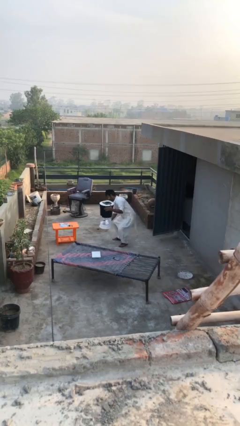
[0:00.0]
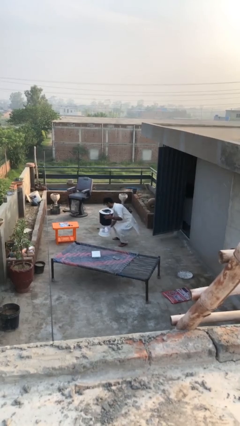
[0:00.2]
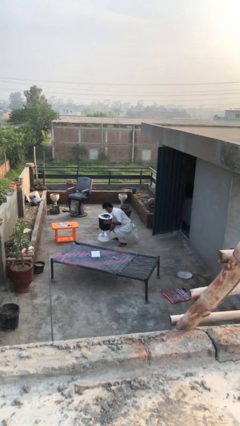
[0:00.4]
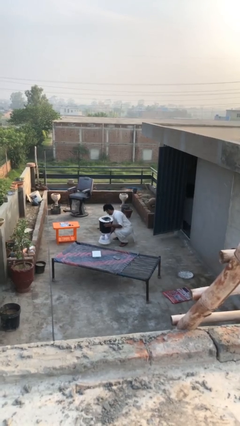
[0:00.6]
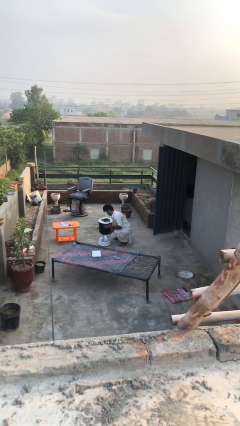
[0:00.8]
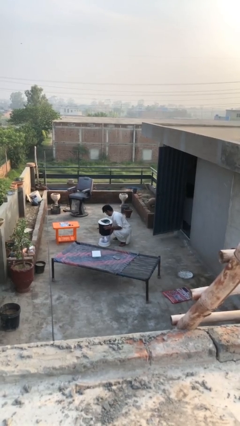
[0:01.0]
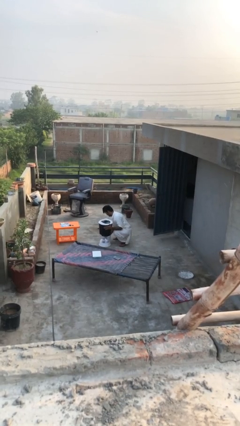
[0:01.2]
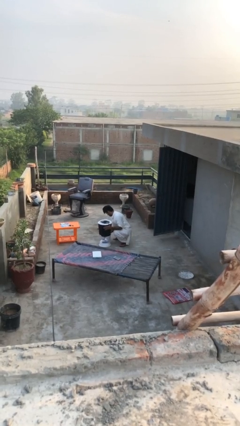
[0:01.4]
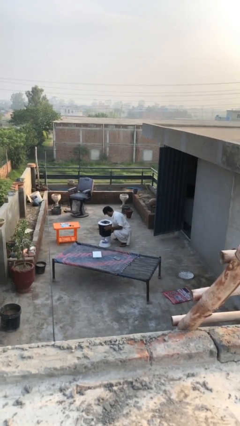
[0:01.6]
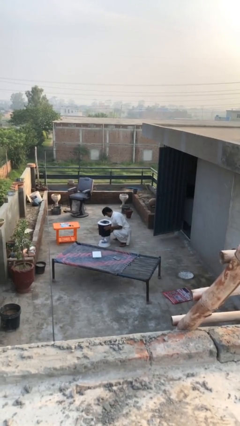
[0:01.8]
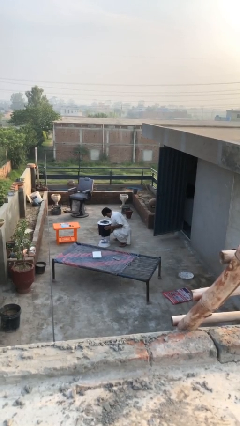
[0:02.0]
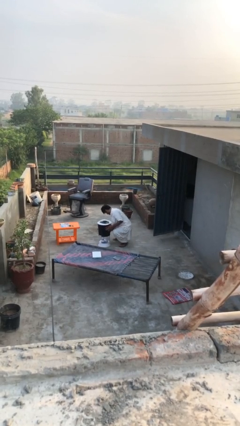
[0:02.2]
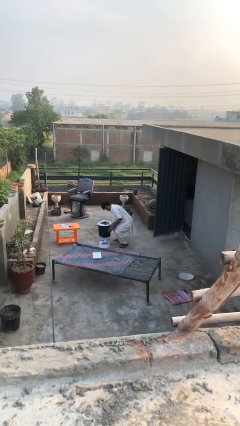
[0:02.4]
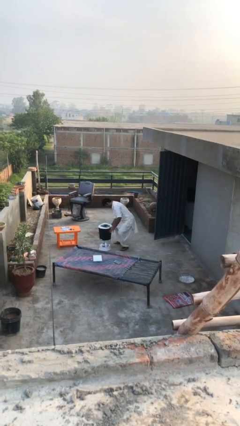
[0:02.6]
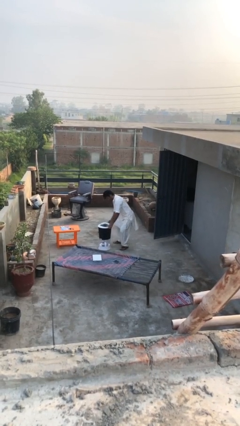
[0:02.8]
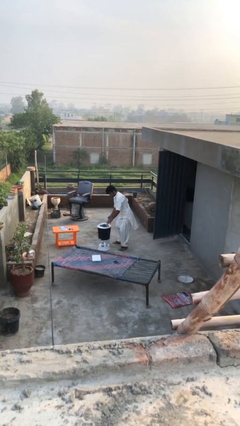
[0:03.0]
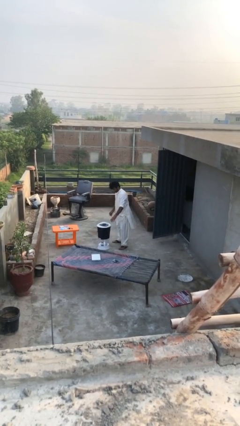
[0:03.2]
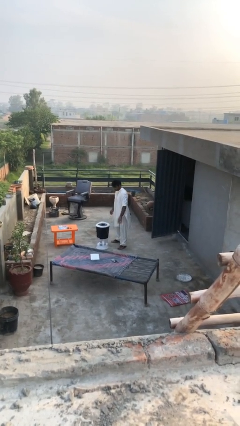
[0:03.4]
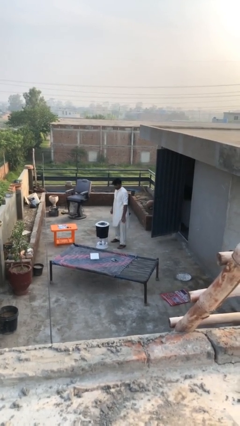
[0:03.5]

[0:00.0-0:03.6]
person puts down object on floor

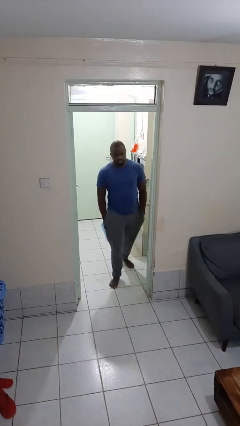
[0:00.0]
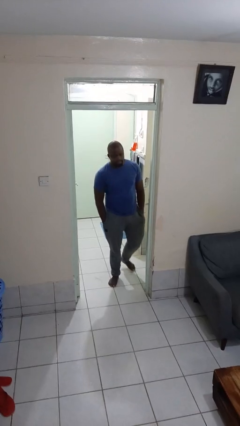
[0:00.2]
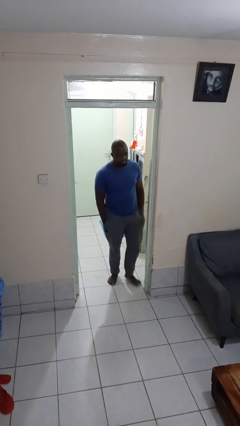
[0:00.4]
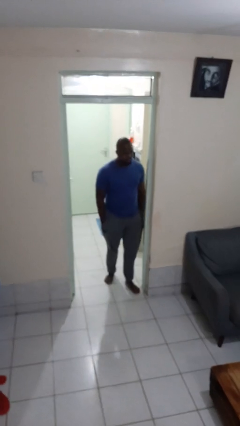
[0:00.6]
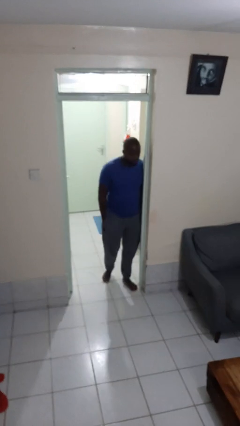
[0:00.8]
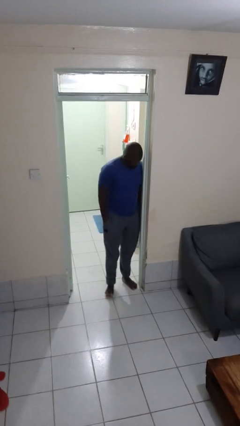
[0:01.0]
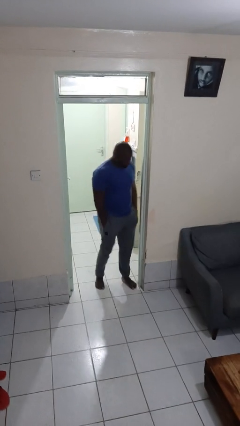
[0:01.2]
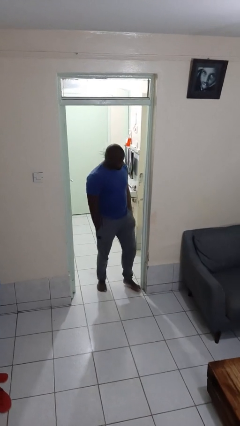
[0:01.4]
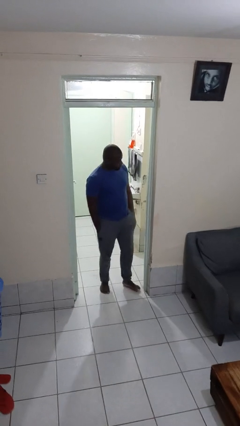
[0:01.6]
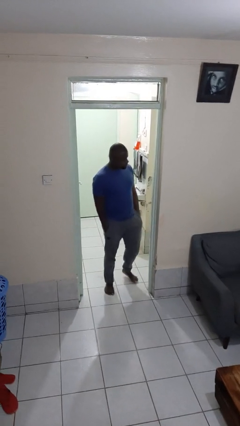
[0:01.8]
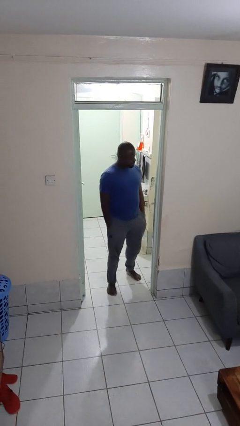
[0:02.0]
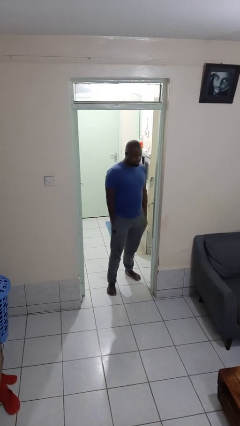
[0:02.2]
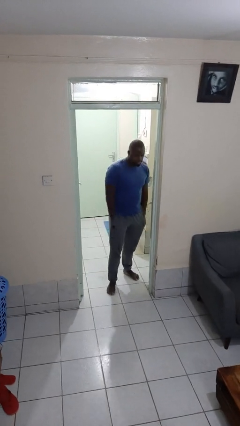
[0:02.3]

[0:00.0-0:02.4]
person bumps into wall

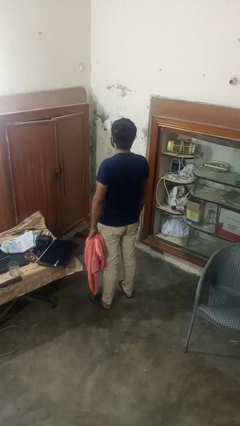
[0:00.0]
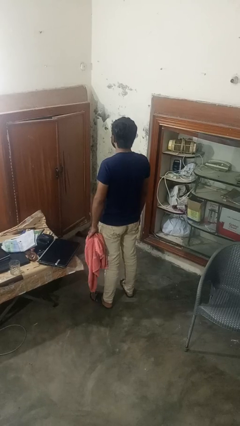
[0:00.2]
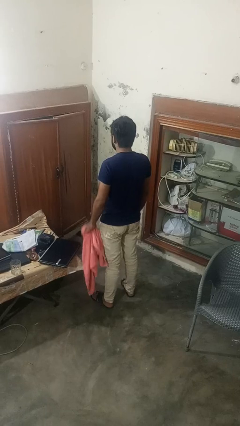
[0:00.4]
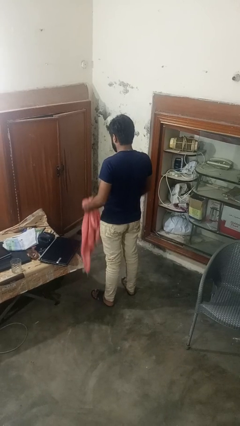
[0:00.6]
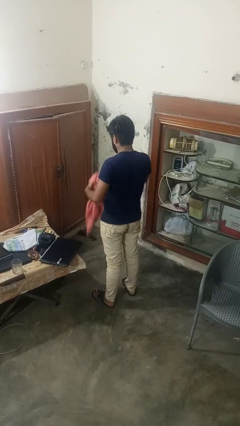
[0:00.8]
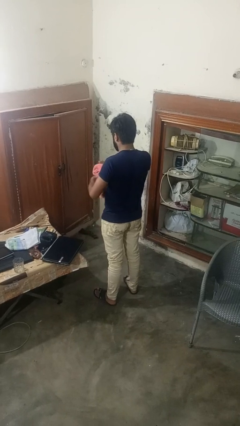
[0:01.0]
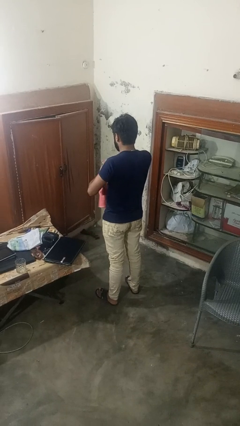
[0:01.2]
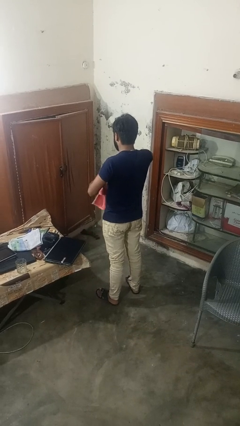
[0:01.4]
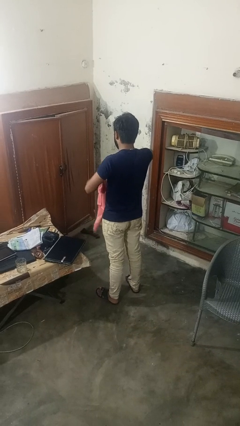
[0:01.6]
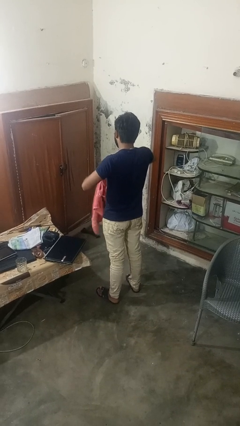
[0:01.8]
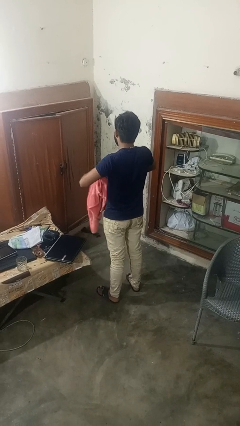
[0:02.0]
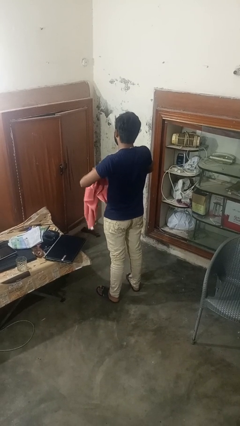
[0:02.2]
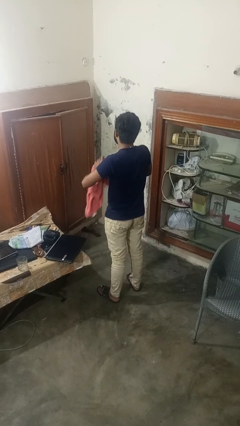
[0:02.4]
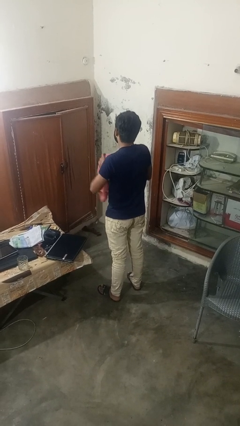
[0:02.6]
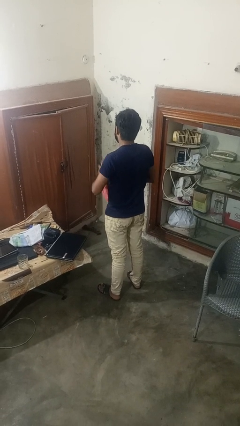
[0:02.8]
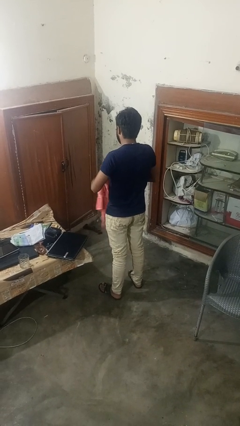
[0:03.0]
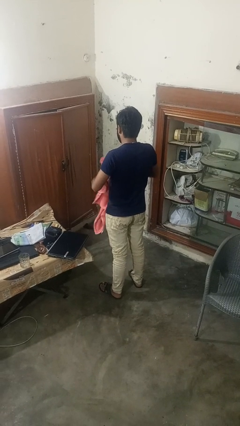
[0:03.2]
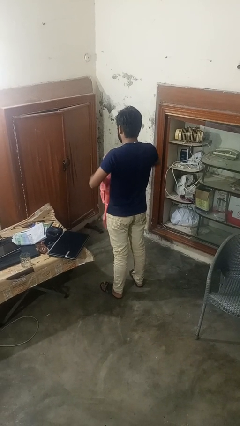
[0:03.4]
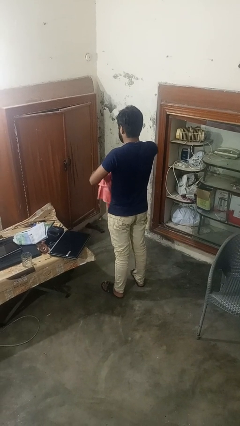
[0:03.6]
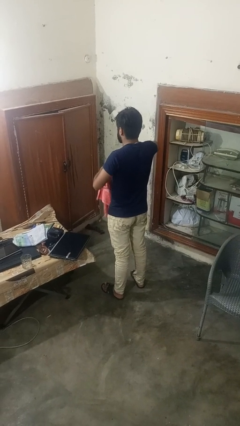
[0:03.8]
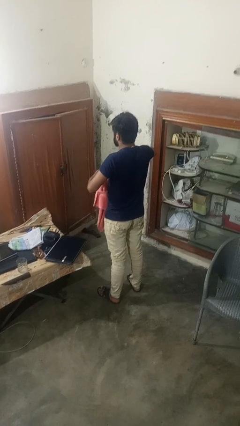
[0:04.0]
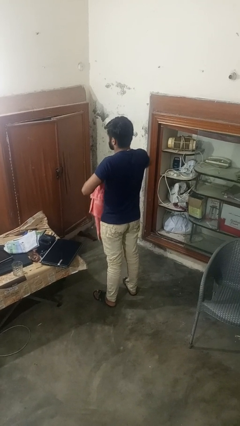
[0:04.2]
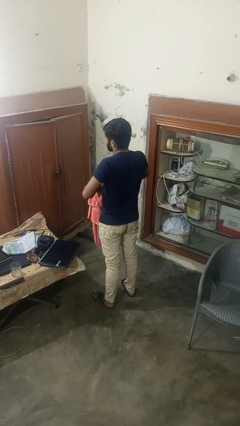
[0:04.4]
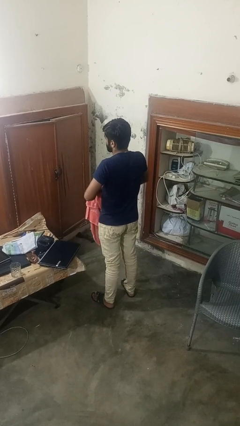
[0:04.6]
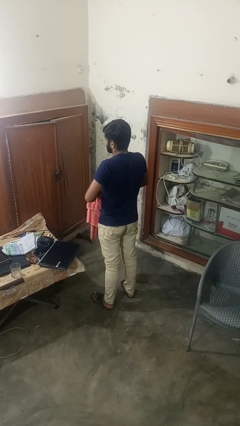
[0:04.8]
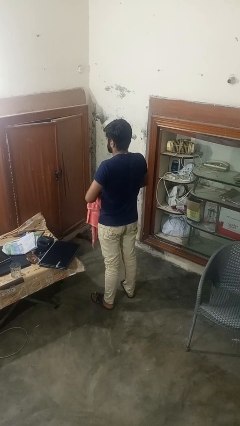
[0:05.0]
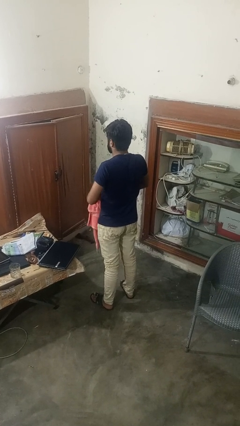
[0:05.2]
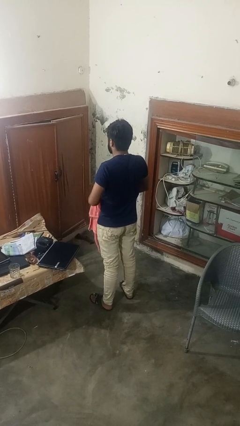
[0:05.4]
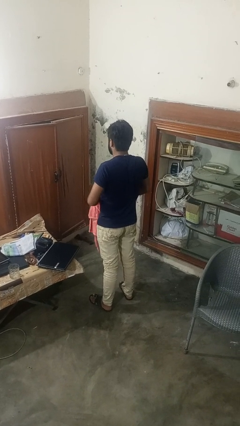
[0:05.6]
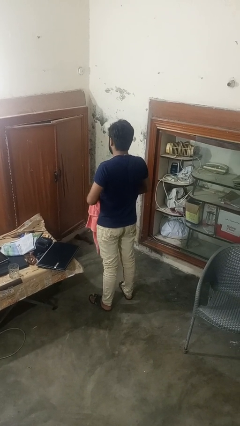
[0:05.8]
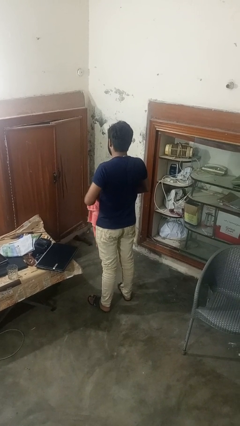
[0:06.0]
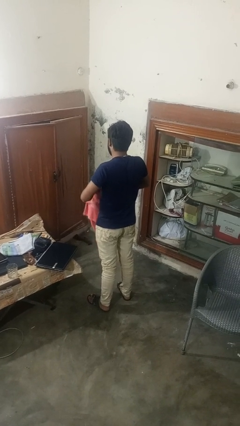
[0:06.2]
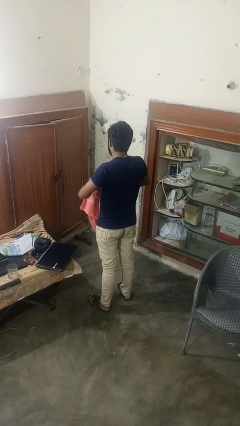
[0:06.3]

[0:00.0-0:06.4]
person squeezes object

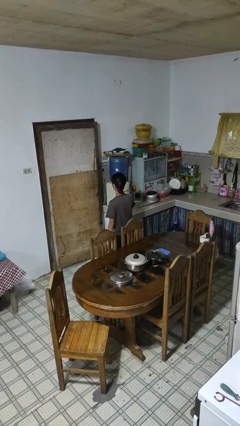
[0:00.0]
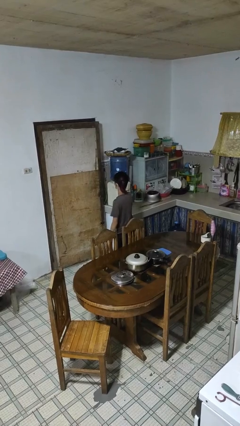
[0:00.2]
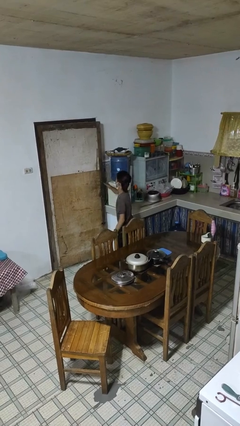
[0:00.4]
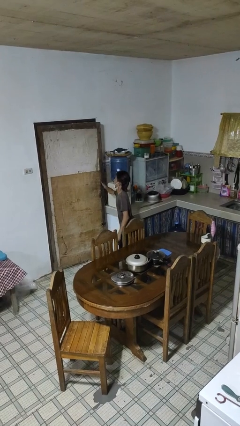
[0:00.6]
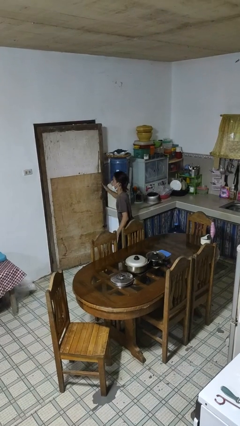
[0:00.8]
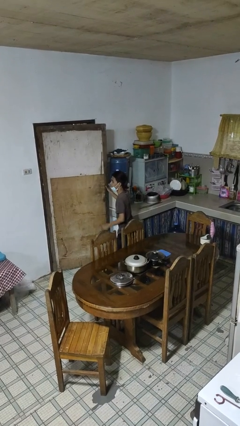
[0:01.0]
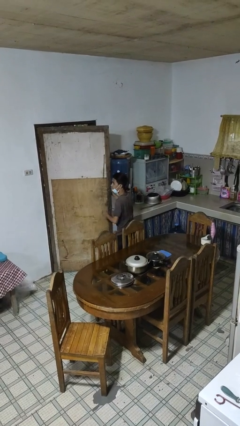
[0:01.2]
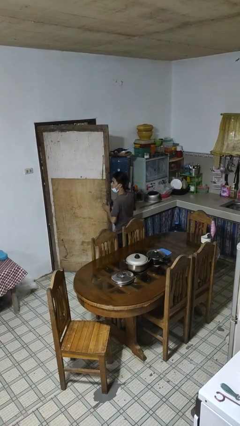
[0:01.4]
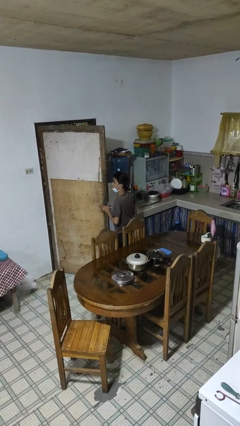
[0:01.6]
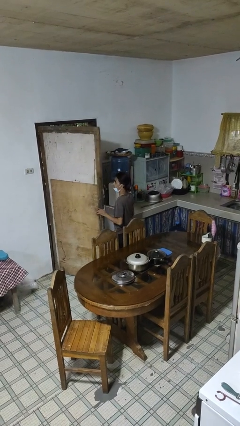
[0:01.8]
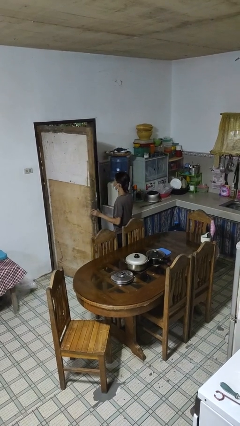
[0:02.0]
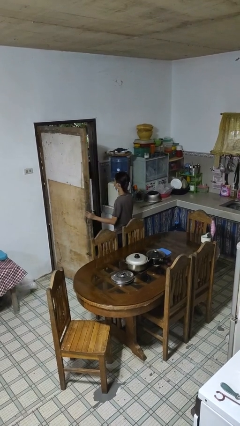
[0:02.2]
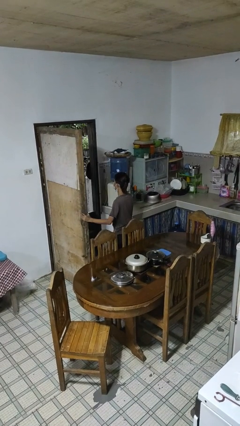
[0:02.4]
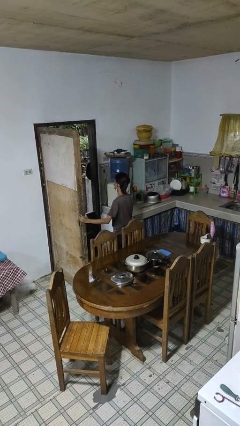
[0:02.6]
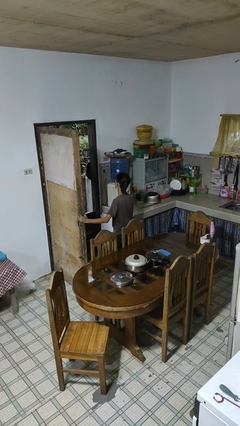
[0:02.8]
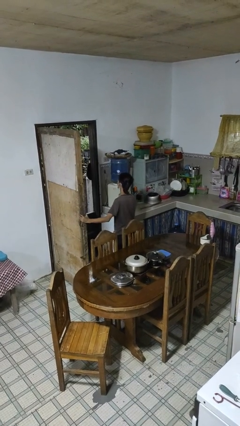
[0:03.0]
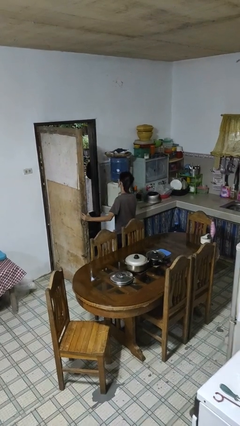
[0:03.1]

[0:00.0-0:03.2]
person opens facility door

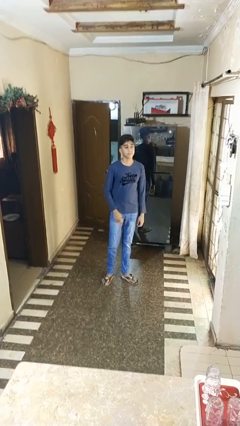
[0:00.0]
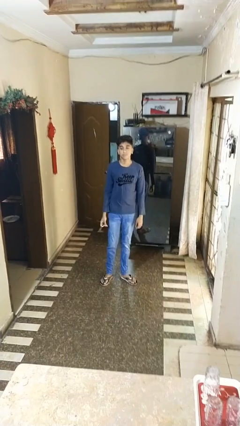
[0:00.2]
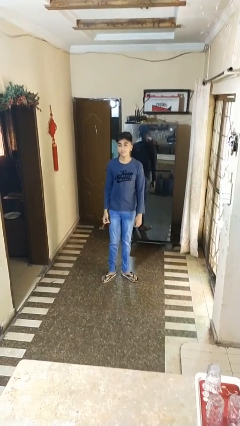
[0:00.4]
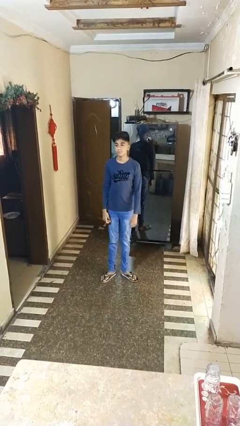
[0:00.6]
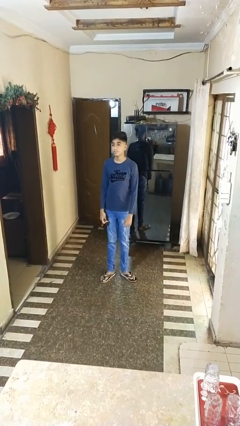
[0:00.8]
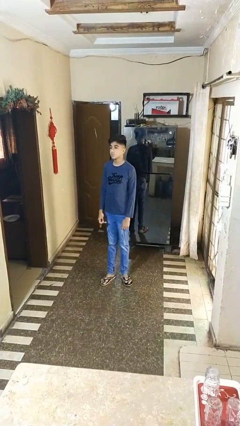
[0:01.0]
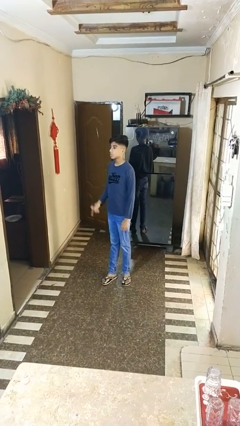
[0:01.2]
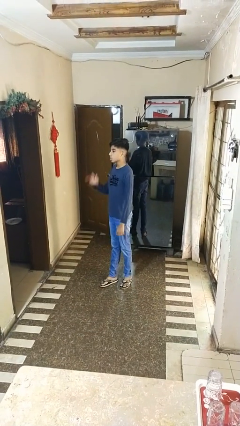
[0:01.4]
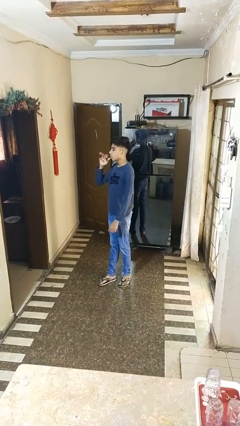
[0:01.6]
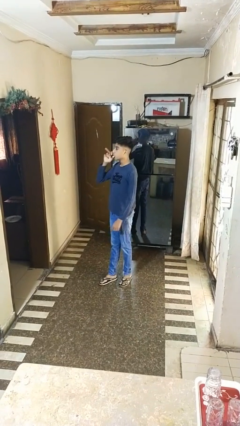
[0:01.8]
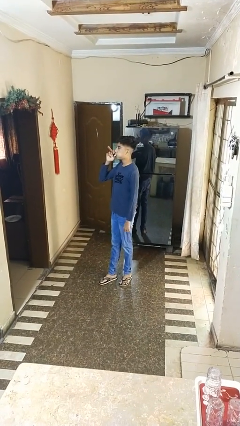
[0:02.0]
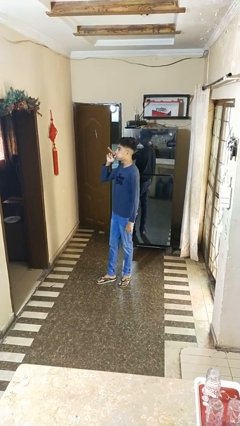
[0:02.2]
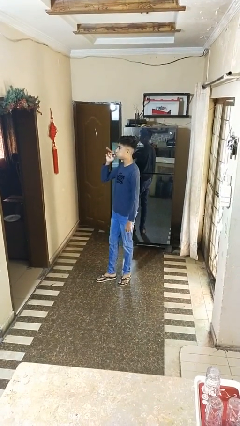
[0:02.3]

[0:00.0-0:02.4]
person vapes
